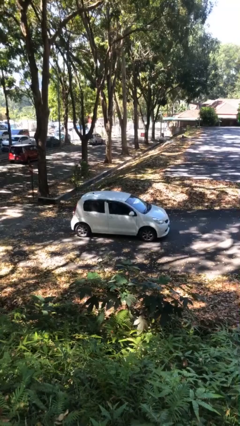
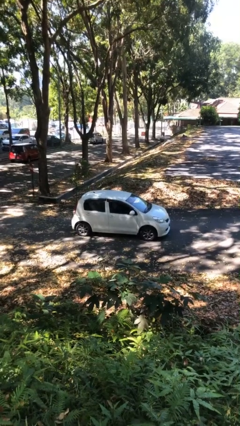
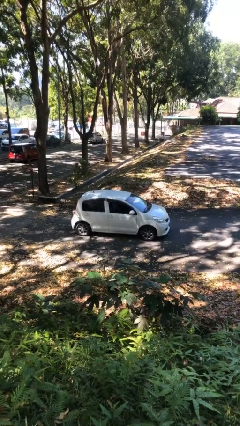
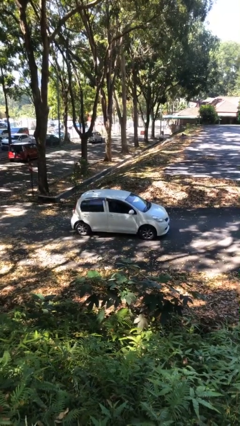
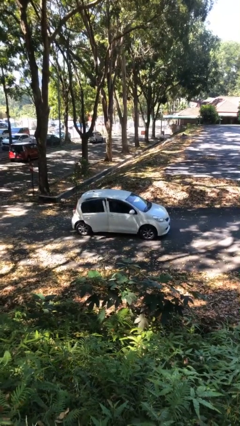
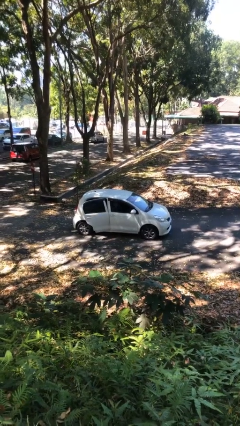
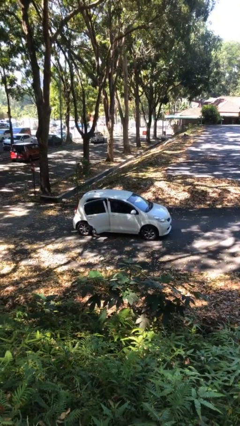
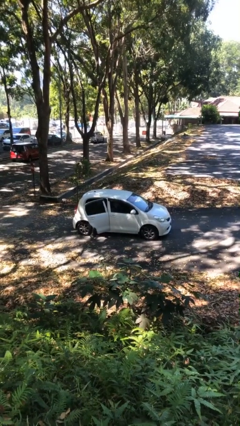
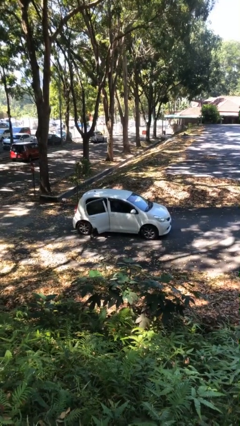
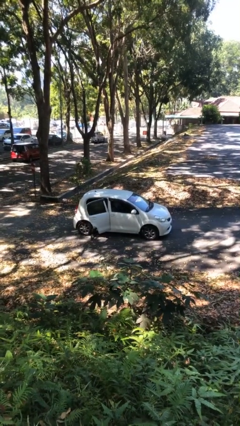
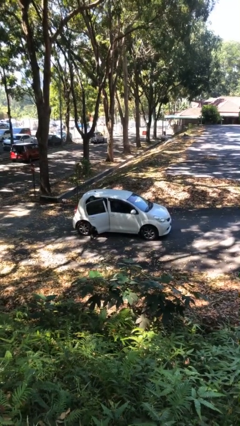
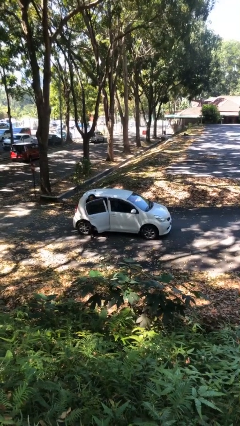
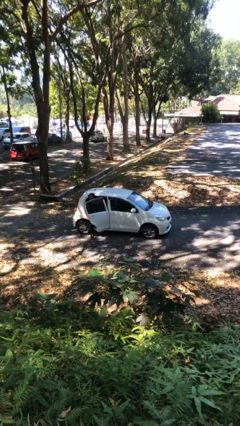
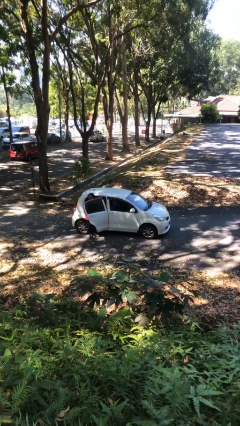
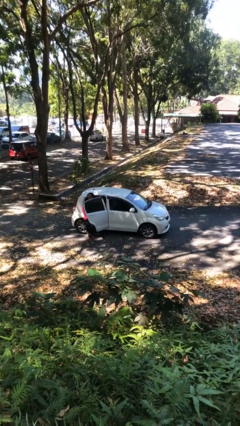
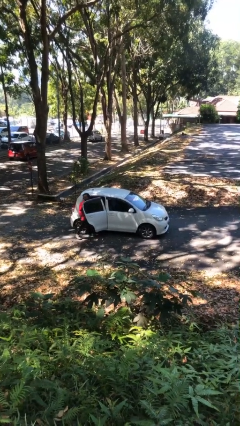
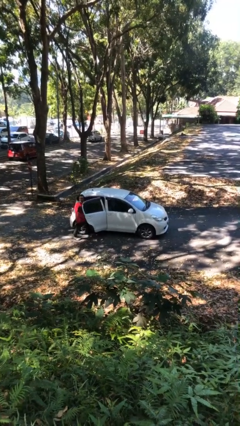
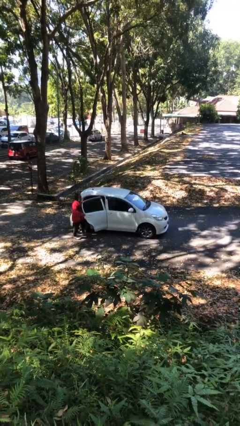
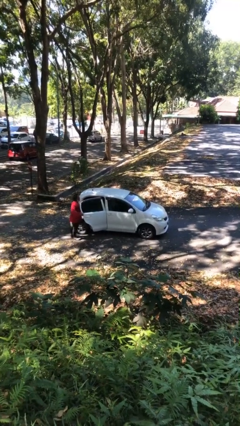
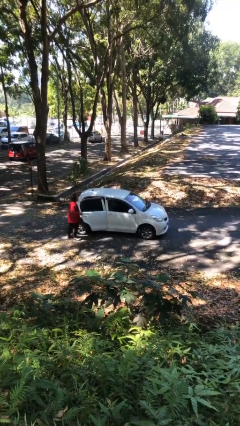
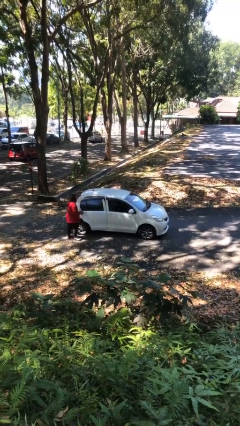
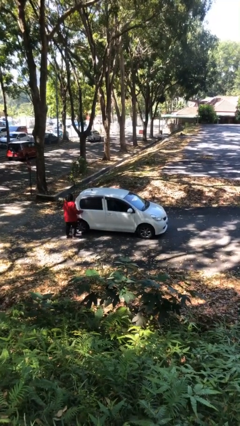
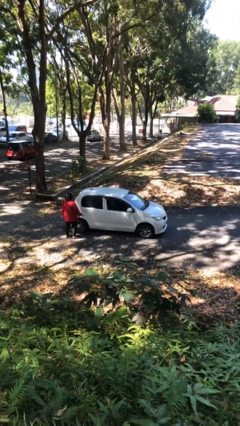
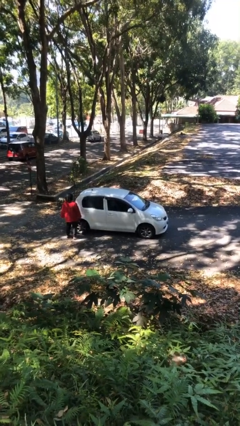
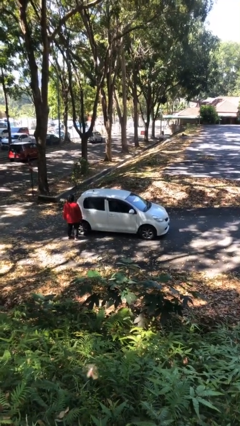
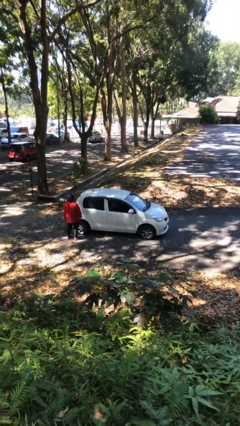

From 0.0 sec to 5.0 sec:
car drops off person

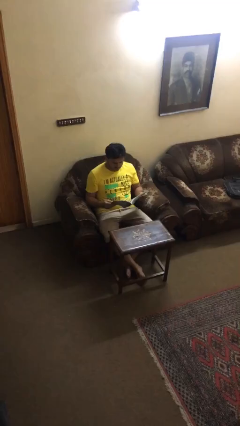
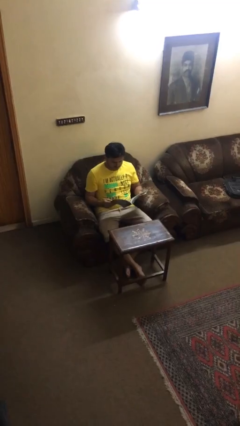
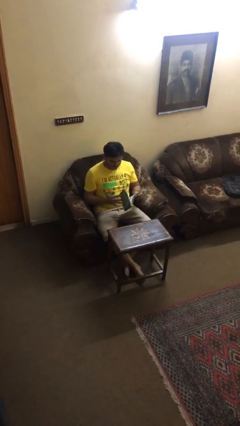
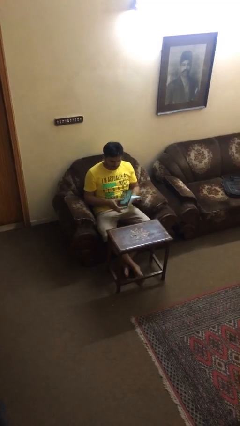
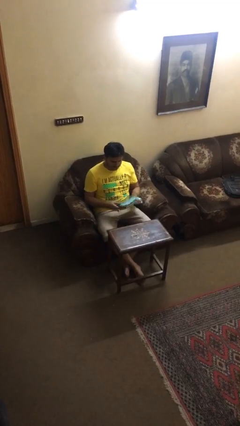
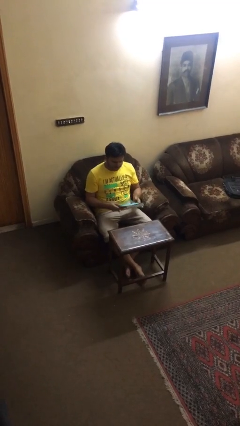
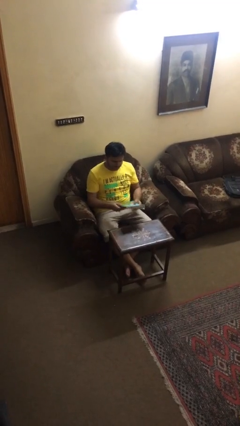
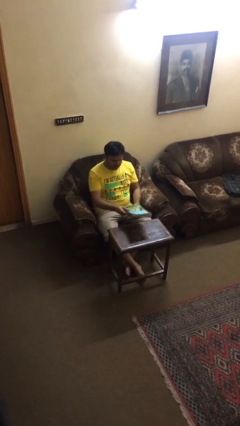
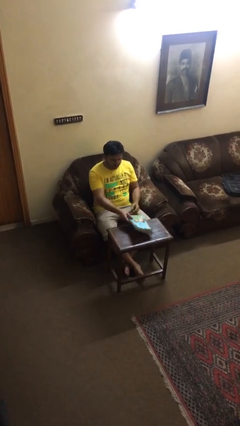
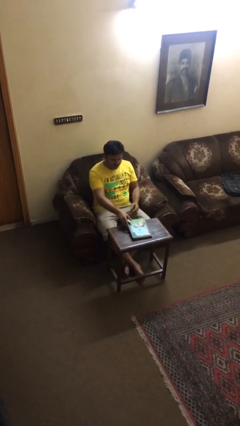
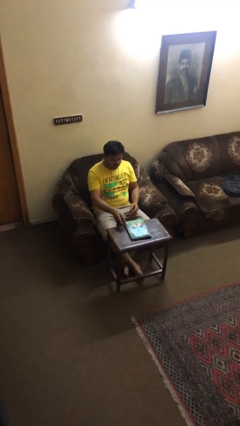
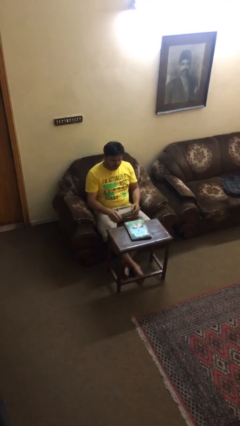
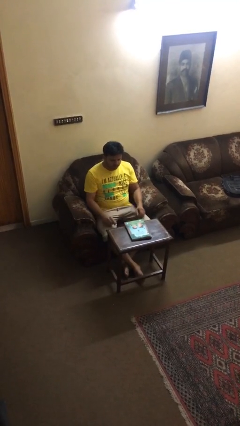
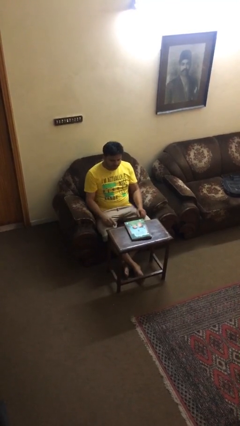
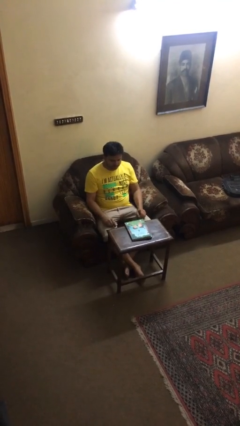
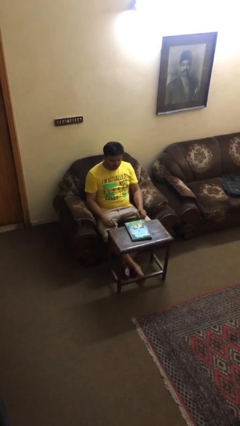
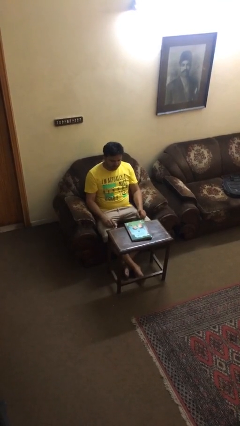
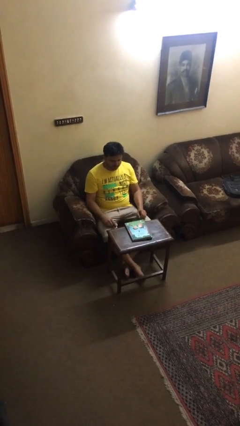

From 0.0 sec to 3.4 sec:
person puts down object on table

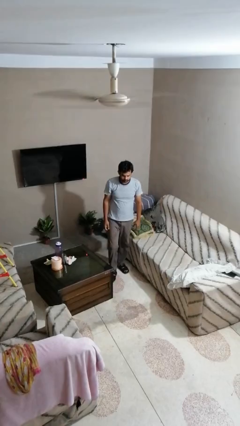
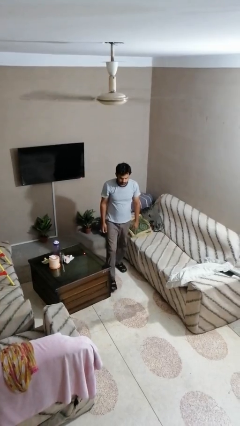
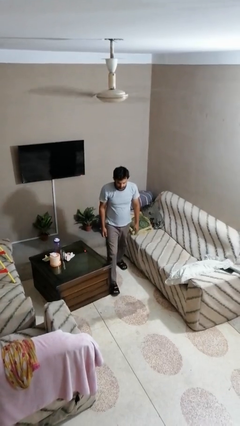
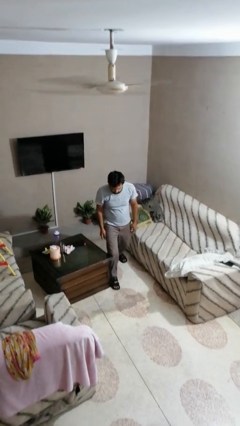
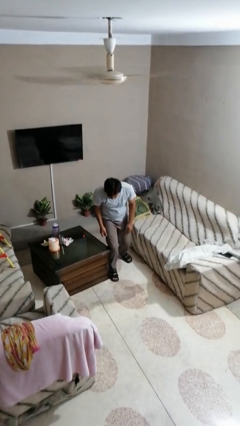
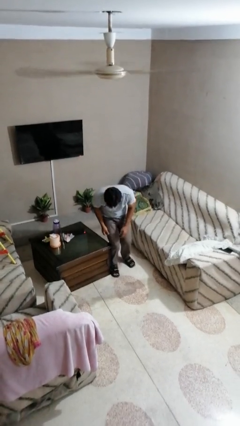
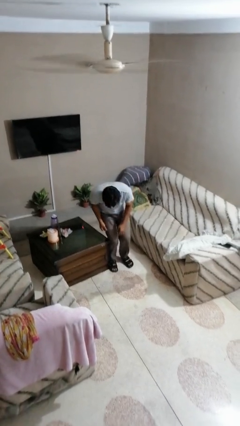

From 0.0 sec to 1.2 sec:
person trips on object on floor

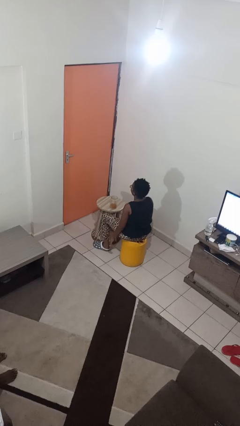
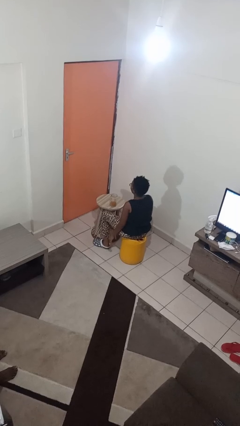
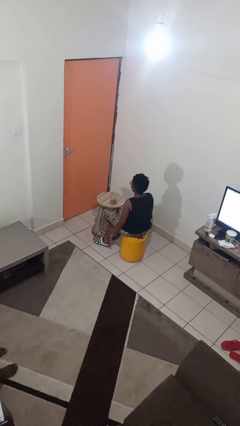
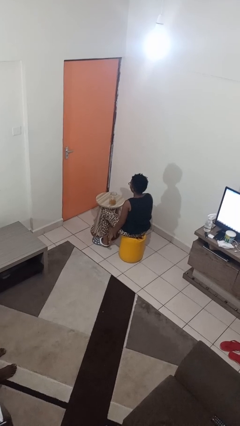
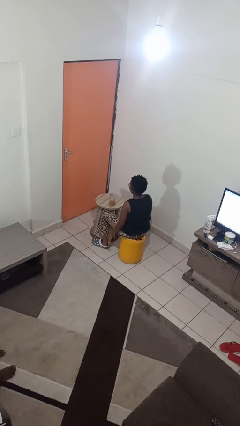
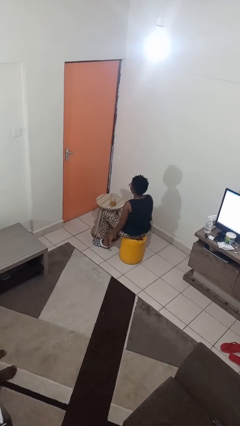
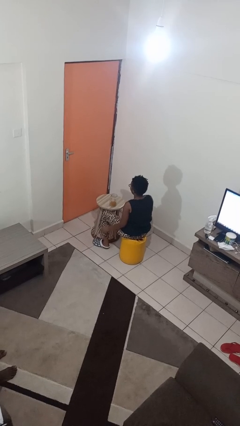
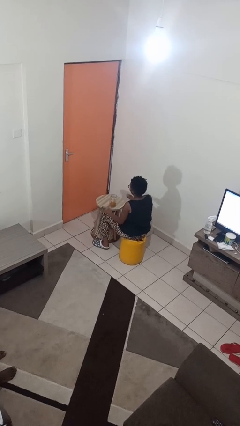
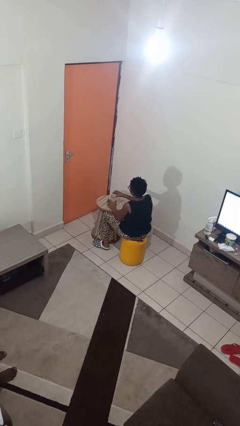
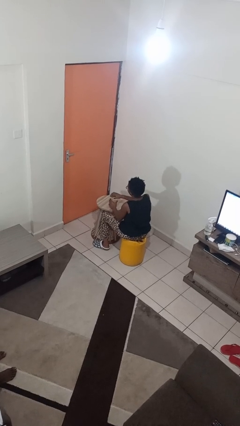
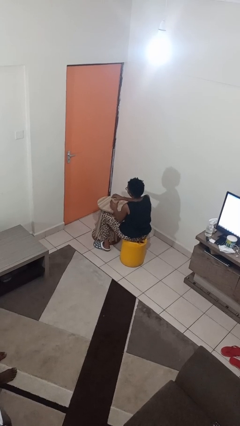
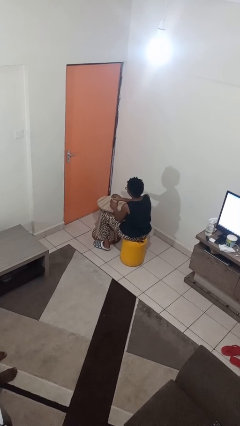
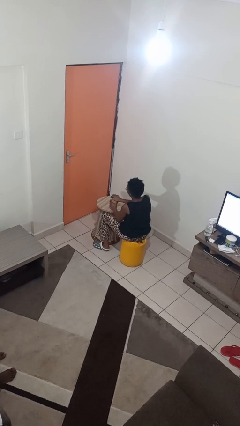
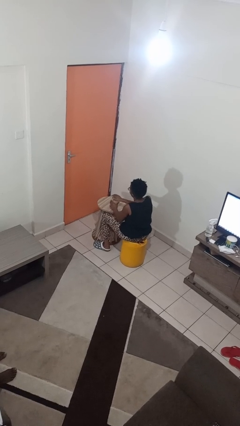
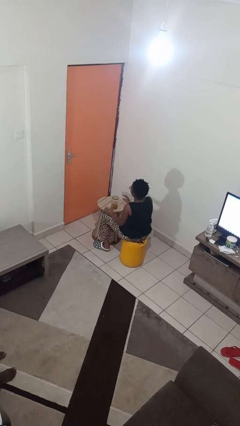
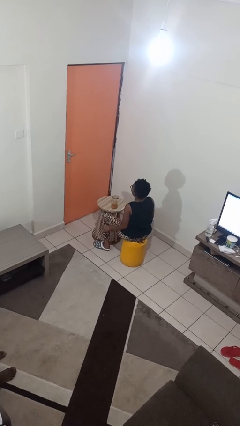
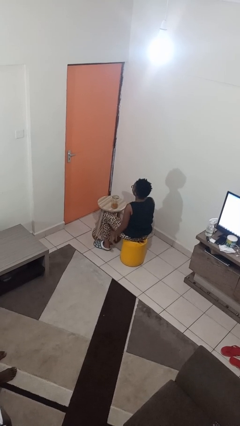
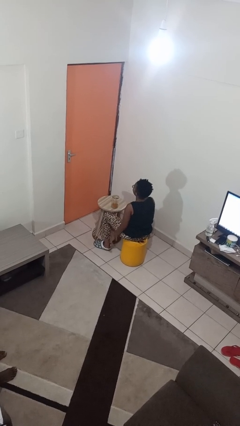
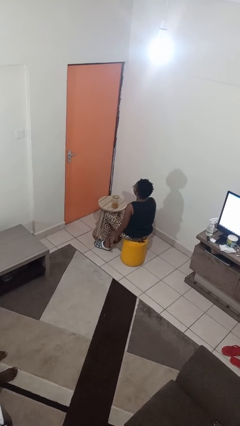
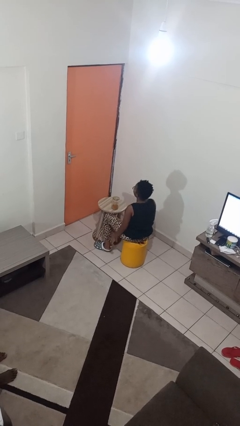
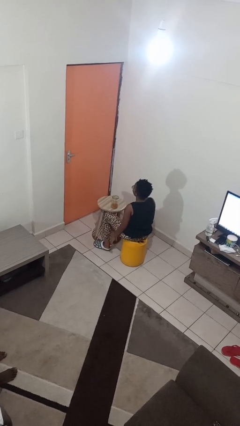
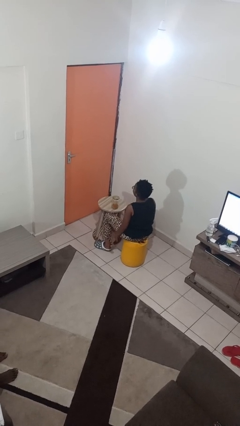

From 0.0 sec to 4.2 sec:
person closes jar

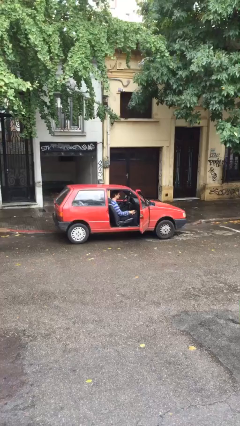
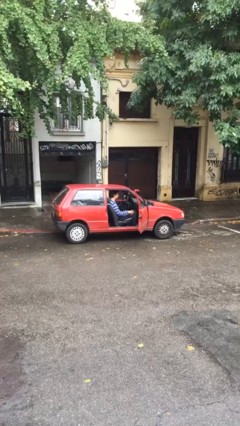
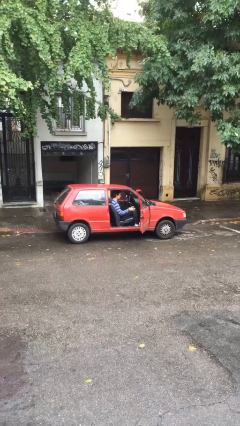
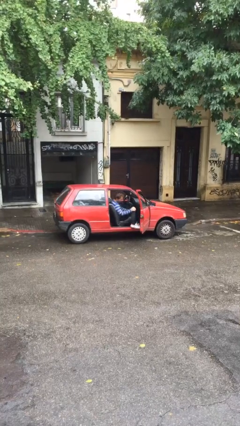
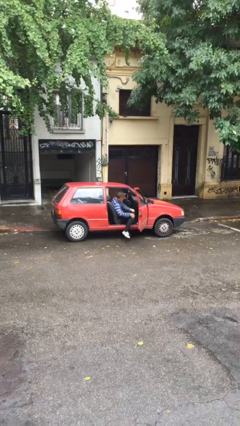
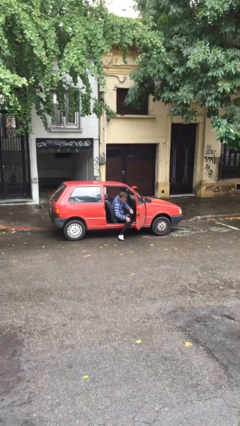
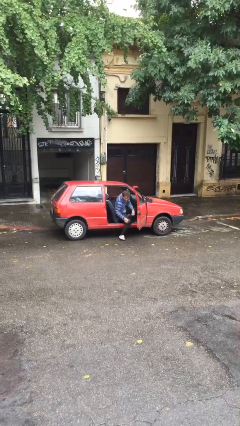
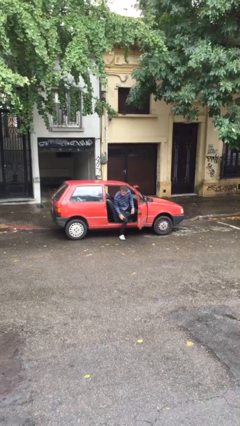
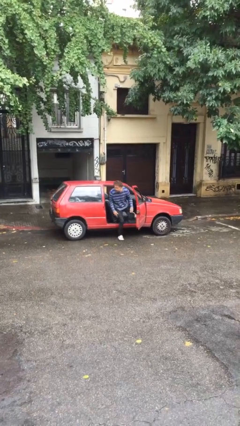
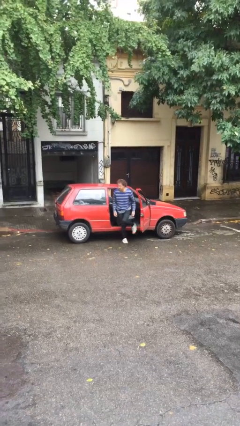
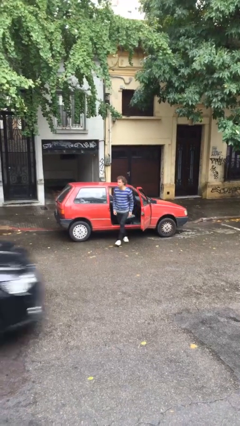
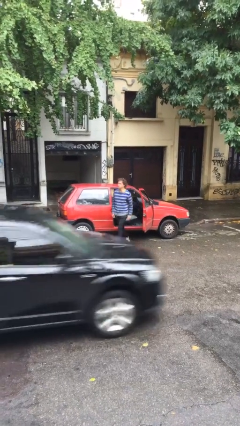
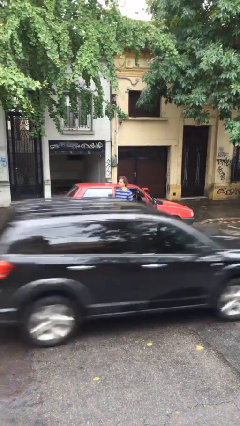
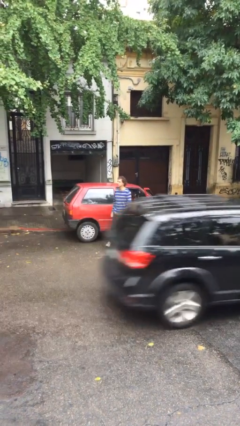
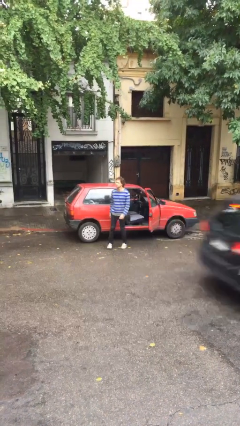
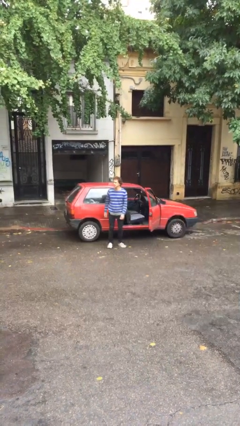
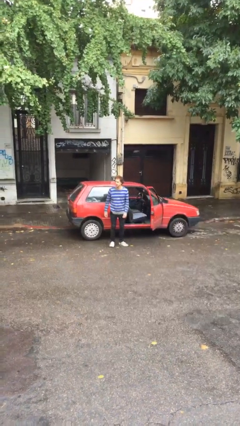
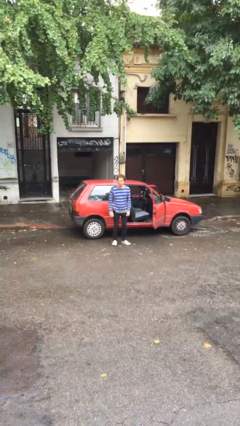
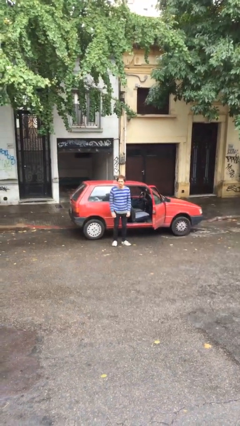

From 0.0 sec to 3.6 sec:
person exits car
